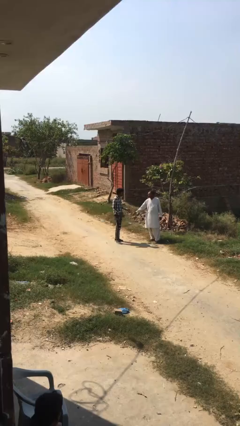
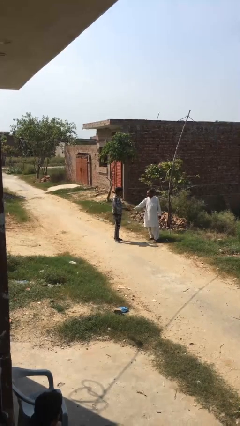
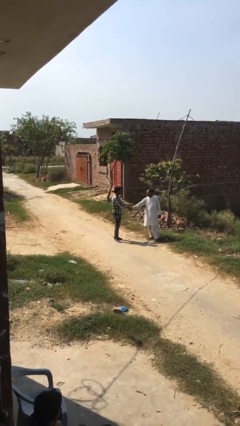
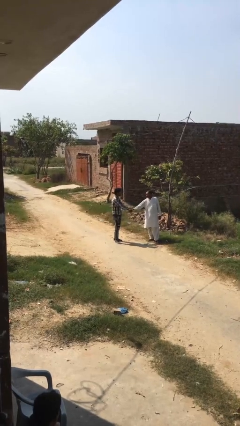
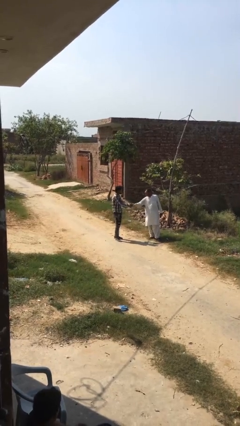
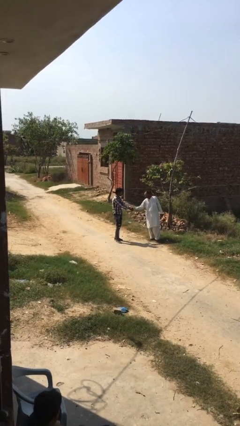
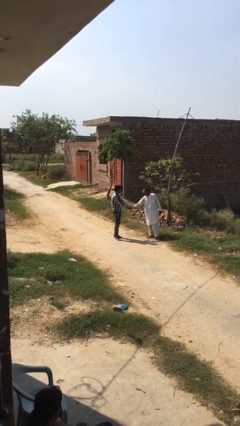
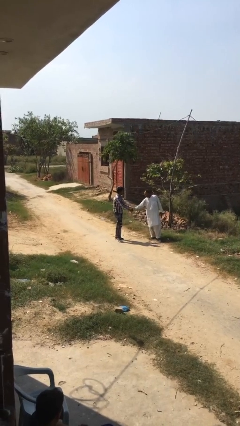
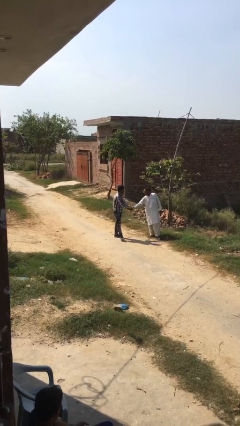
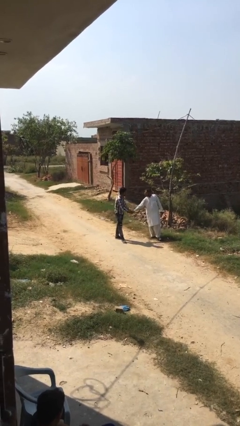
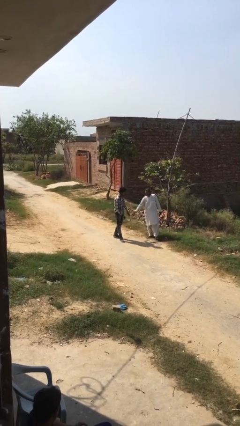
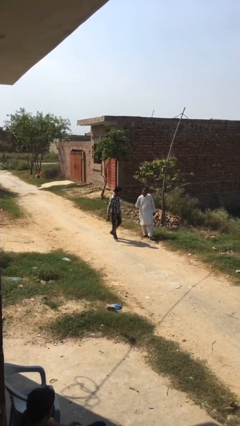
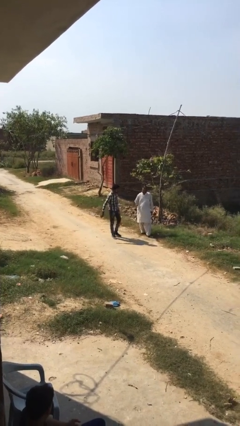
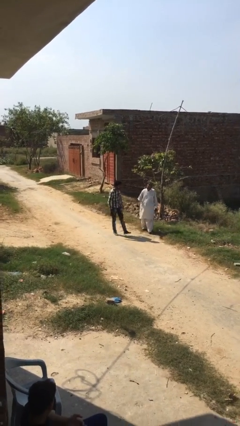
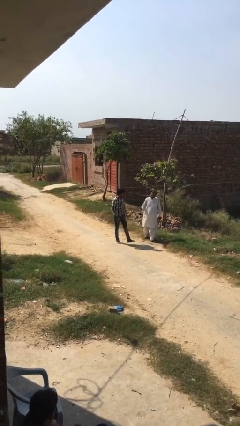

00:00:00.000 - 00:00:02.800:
person shakes hand

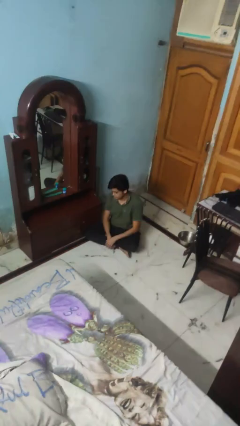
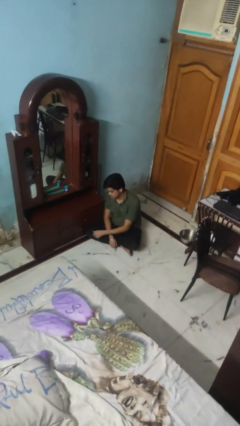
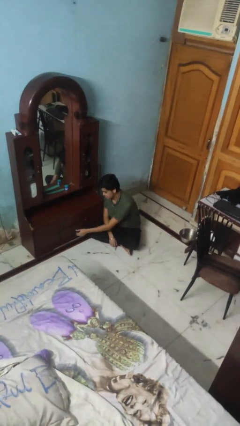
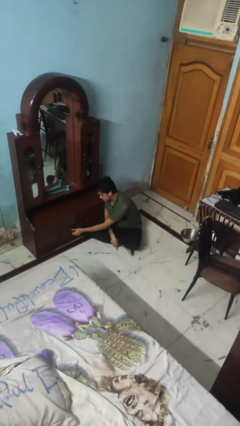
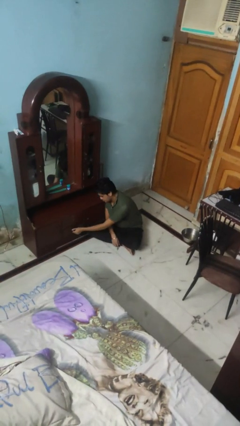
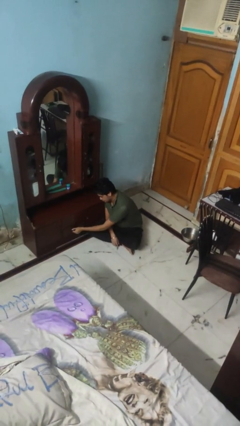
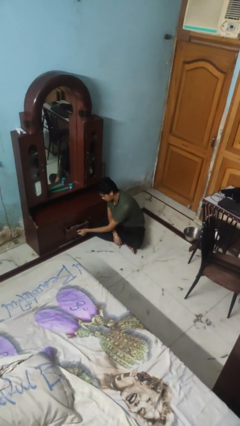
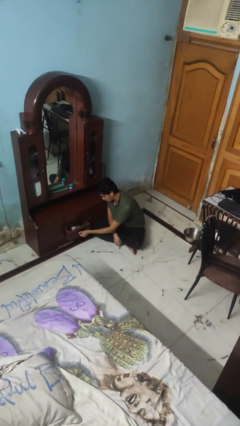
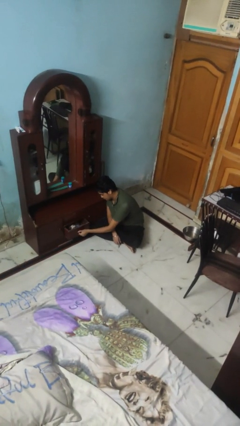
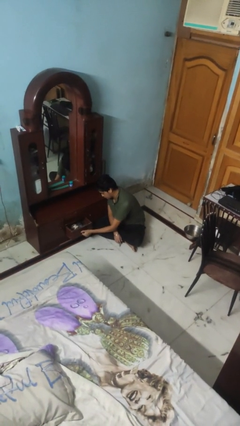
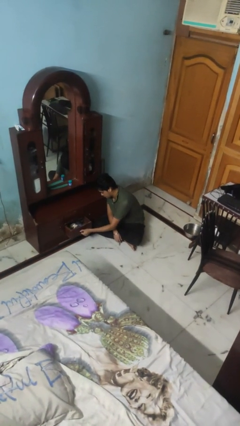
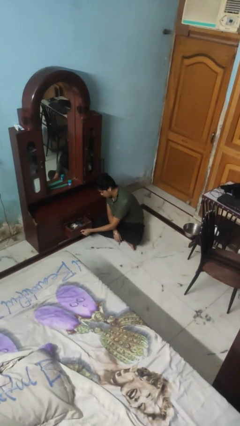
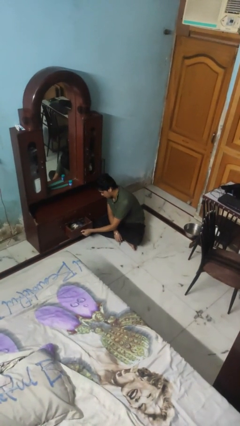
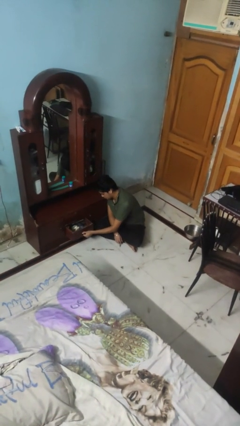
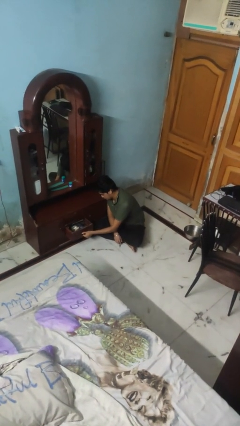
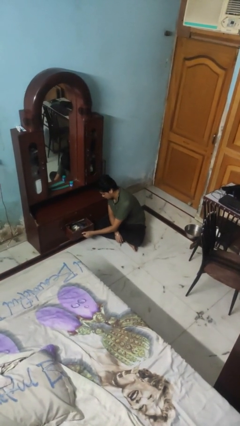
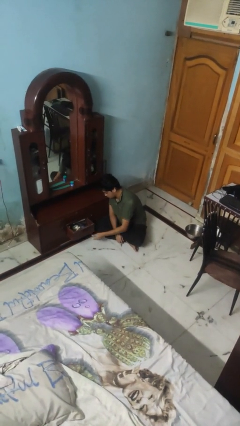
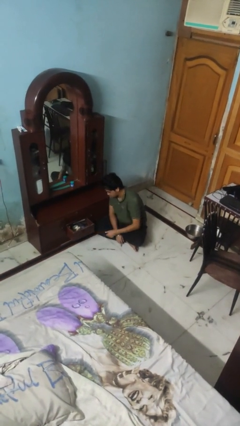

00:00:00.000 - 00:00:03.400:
person opens dresser drawer

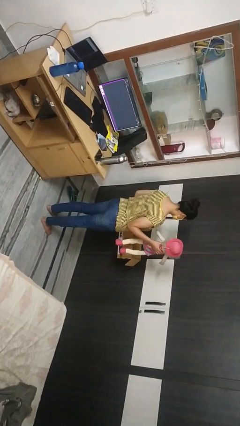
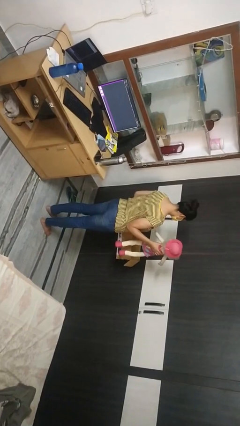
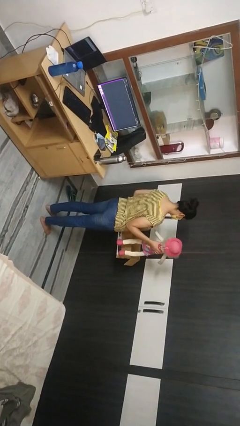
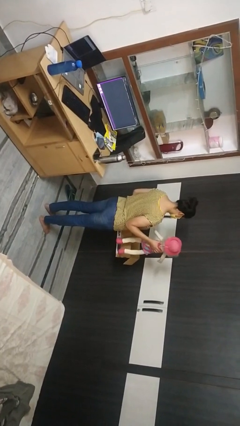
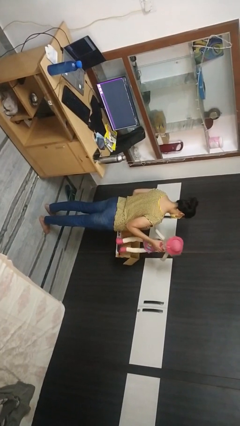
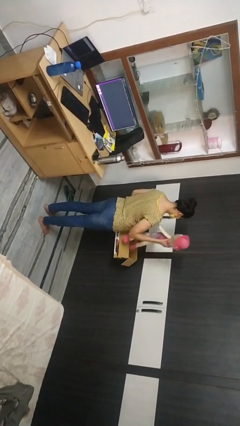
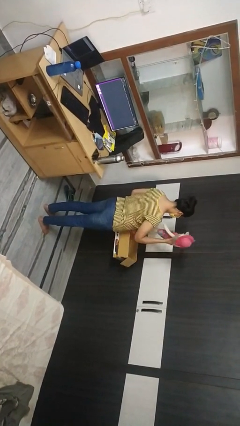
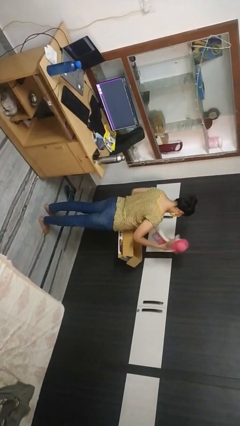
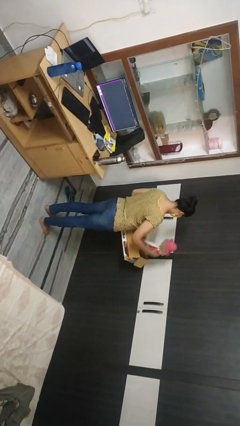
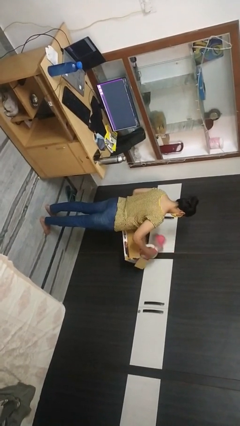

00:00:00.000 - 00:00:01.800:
person puts object into box

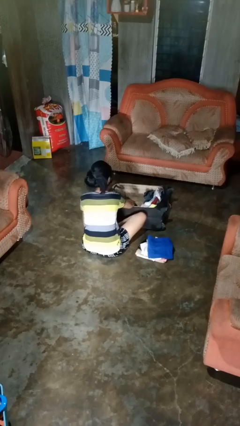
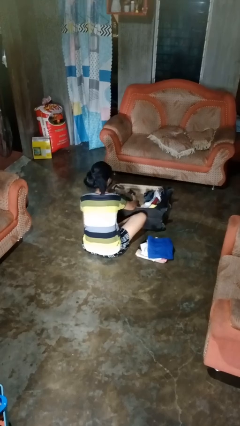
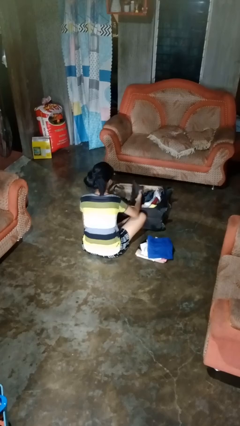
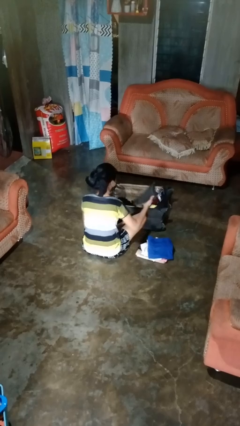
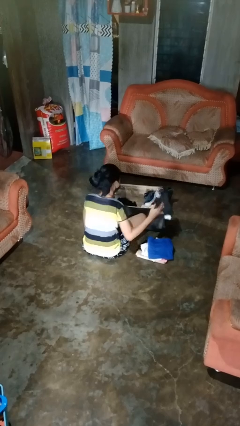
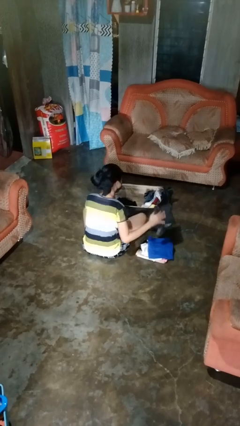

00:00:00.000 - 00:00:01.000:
person unloads clothes from suitcase

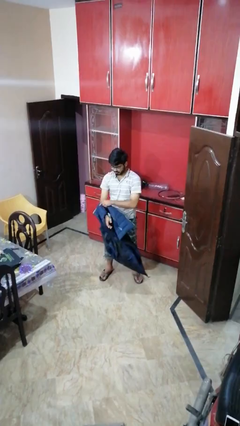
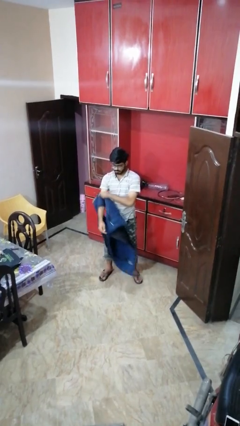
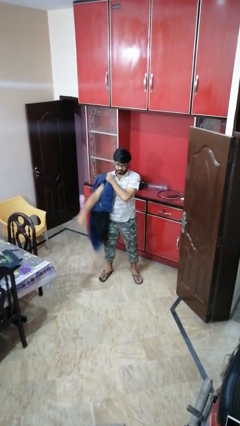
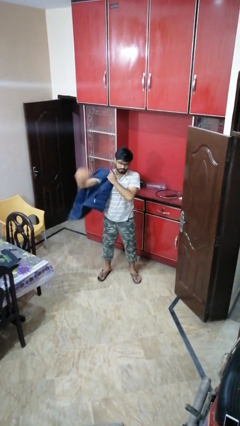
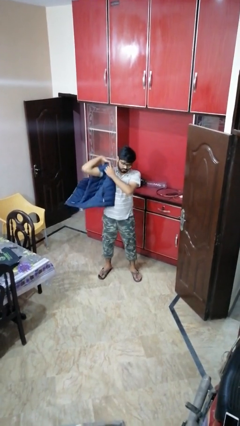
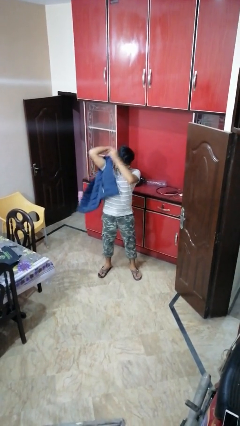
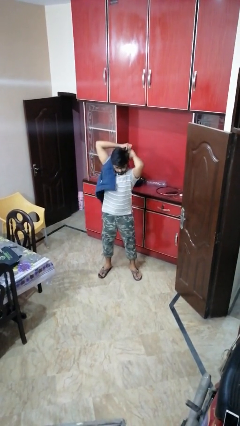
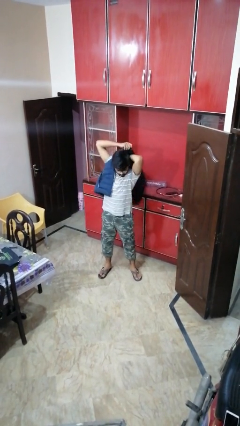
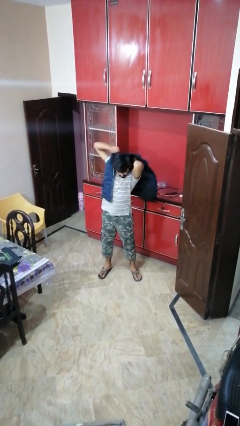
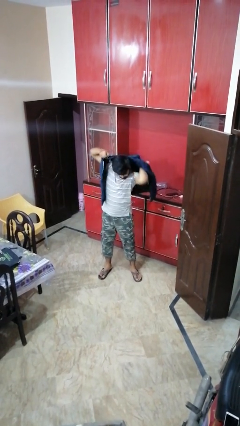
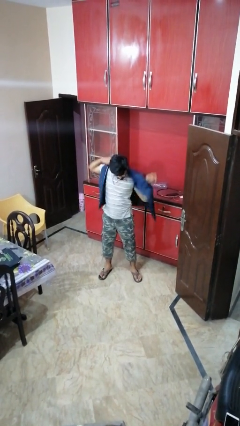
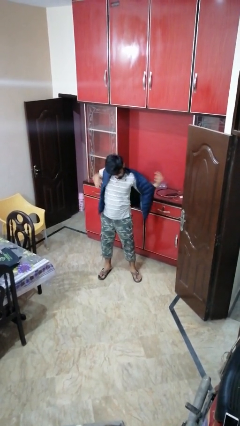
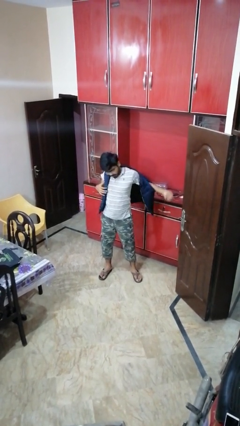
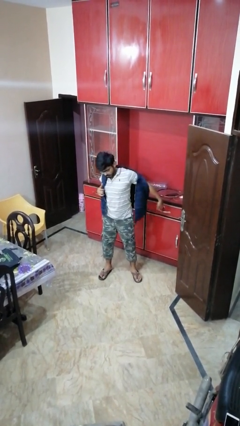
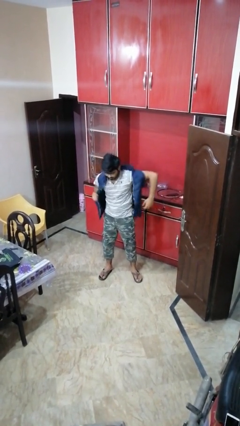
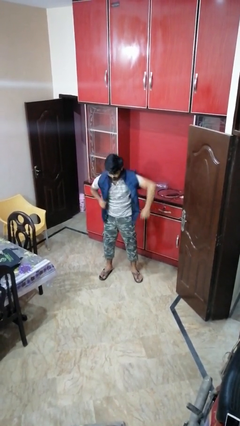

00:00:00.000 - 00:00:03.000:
person puts on jacket

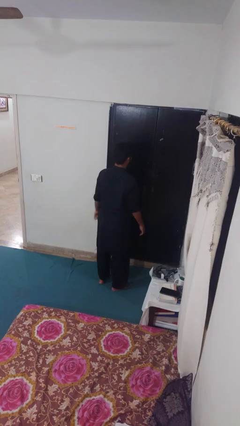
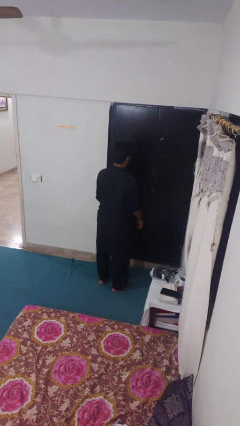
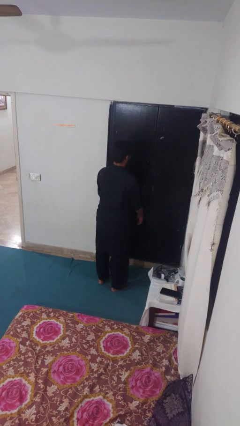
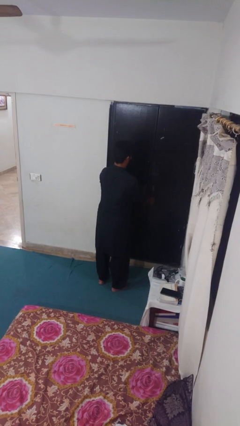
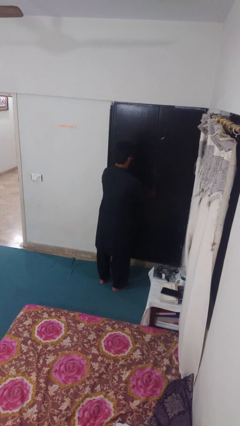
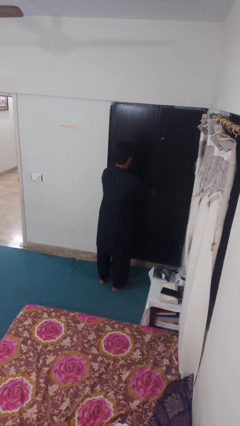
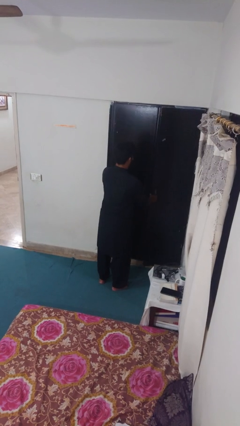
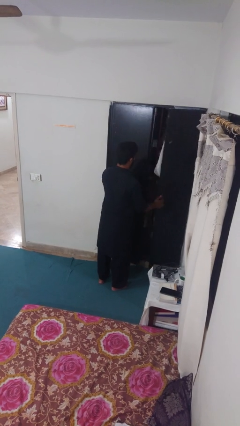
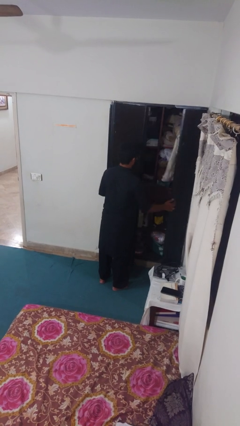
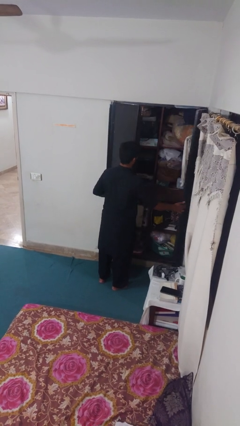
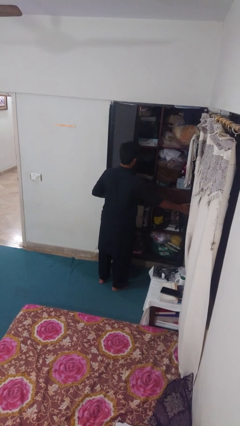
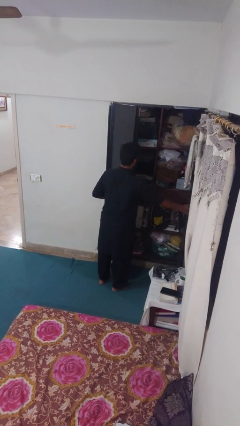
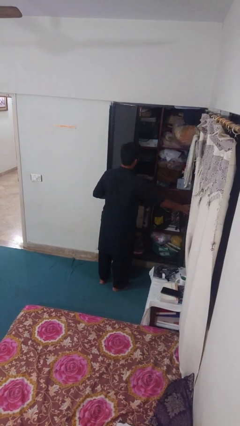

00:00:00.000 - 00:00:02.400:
person opens closet door

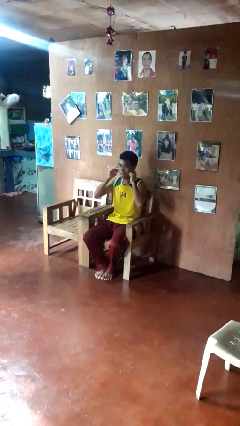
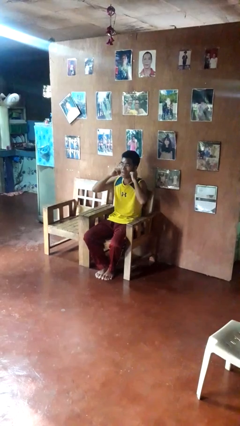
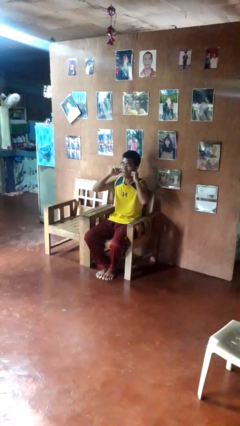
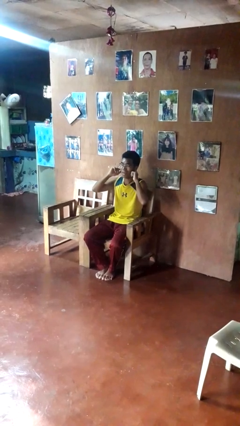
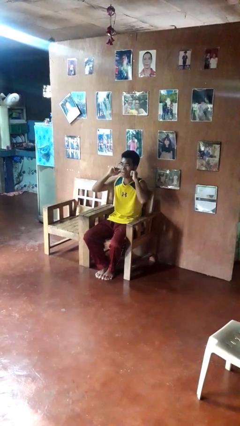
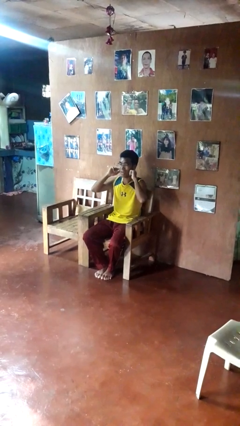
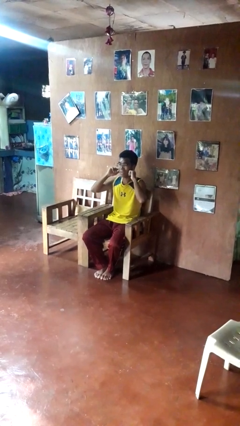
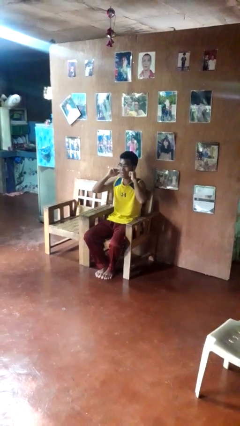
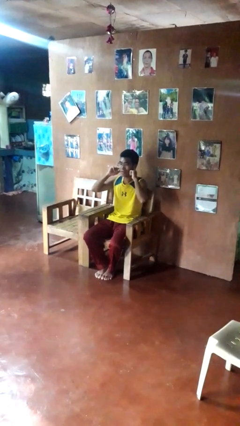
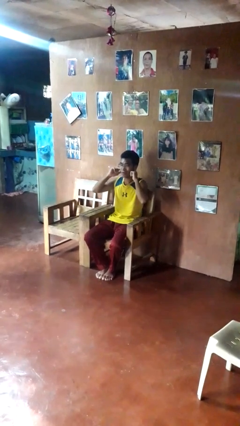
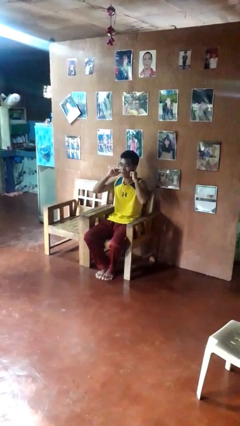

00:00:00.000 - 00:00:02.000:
person puts fingers in ear

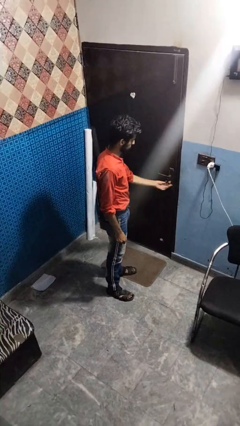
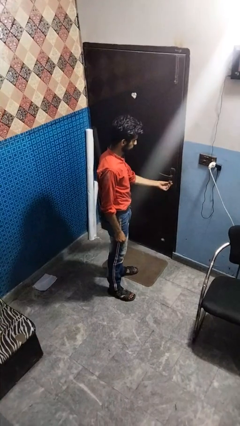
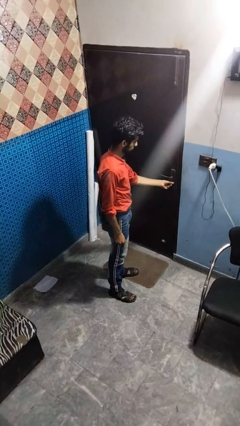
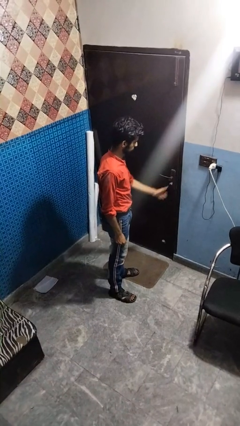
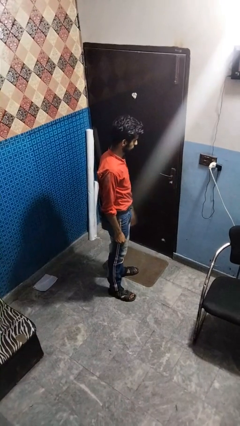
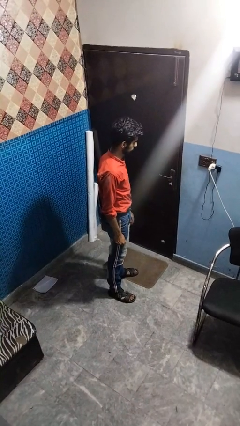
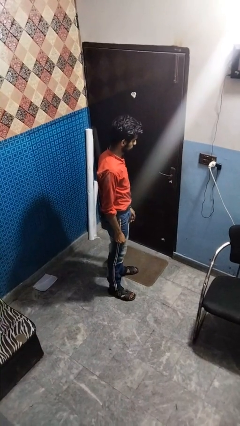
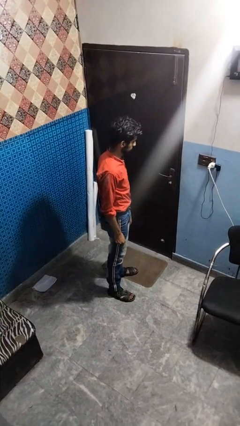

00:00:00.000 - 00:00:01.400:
person locks door with keys
